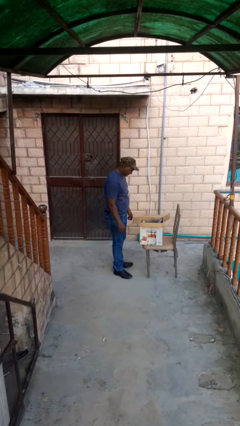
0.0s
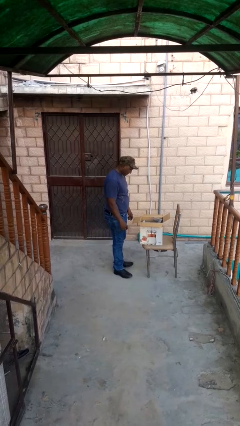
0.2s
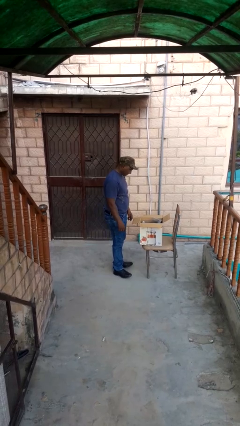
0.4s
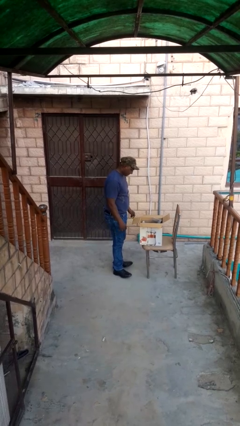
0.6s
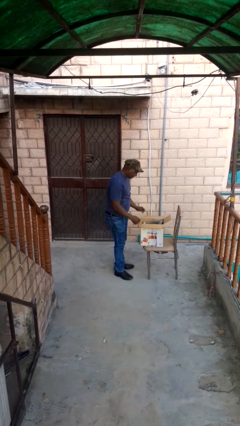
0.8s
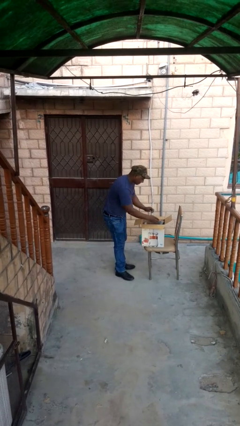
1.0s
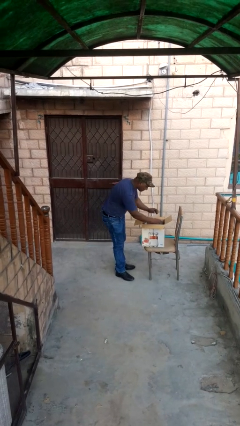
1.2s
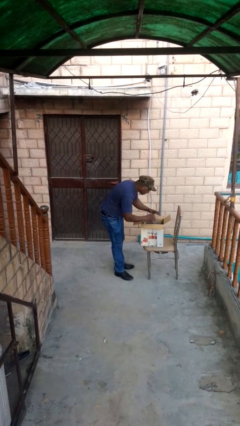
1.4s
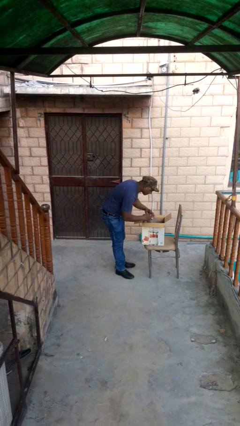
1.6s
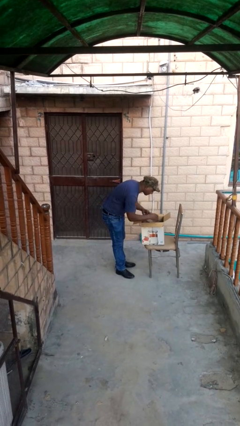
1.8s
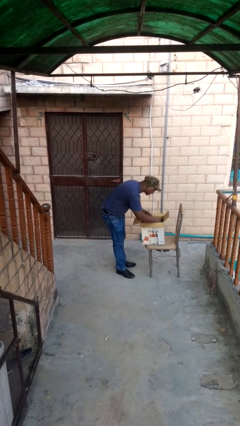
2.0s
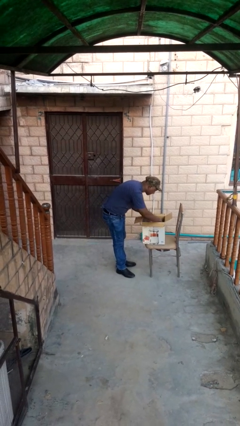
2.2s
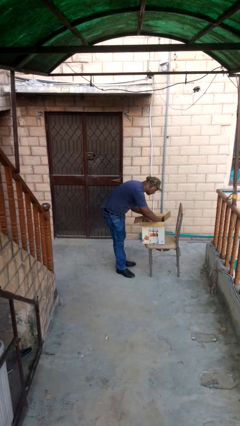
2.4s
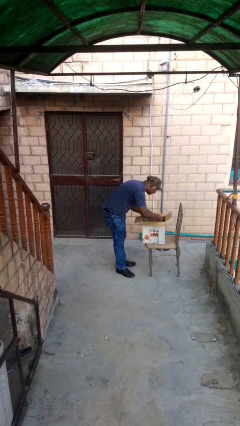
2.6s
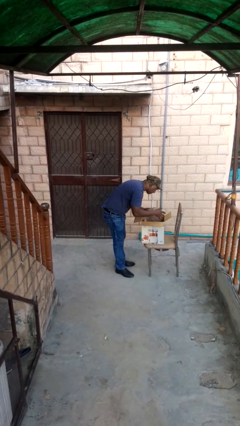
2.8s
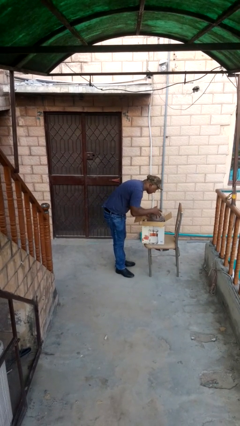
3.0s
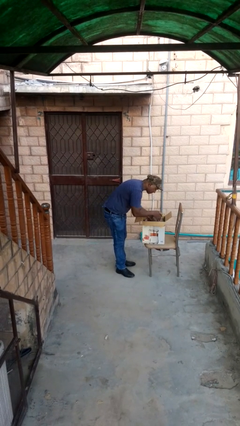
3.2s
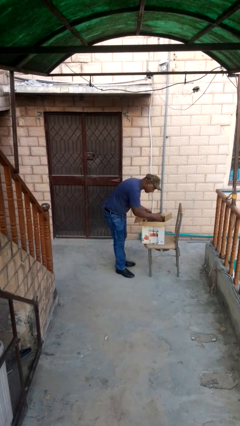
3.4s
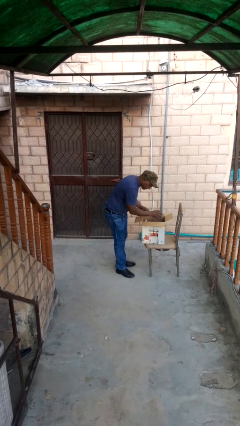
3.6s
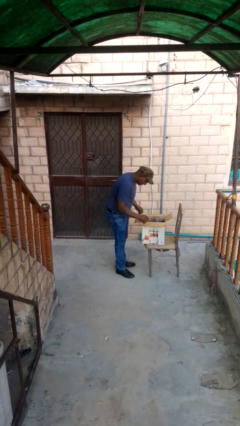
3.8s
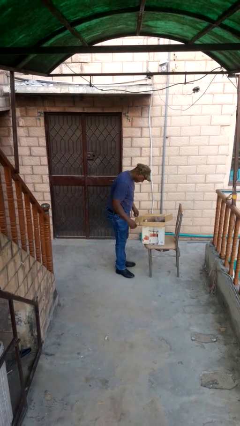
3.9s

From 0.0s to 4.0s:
person searches in box

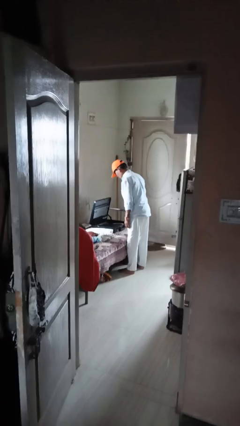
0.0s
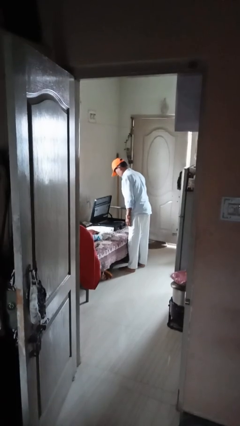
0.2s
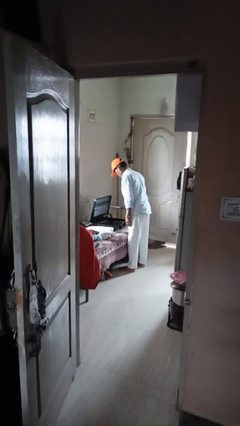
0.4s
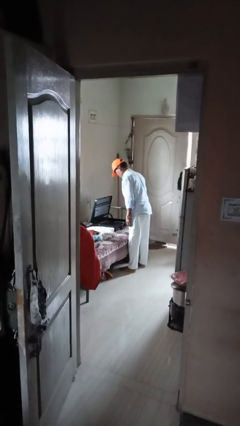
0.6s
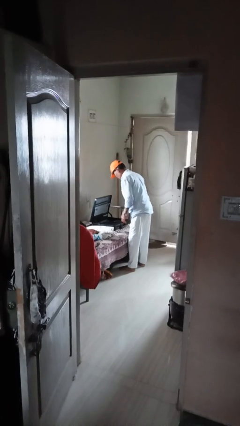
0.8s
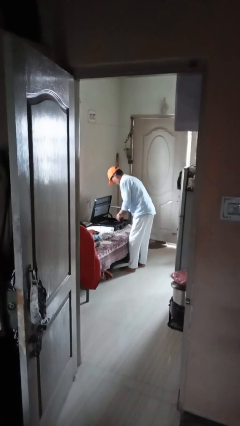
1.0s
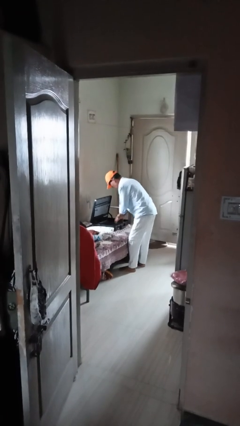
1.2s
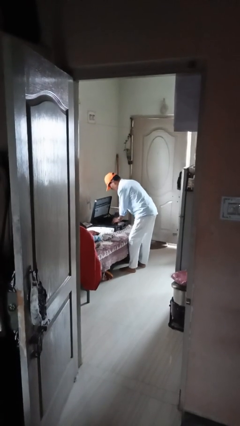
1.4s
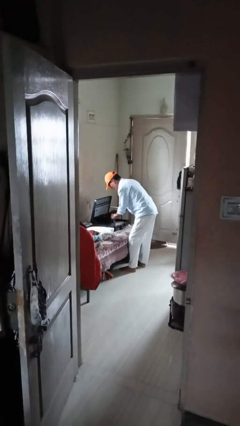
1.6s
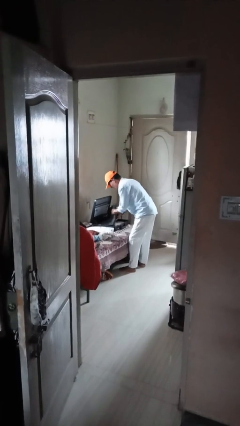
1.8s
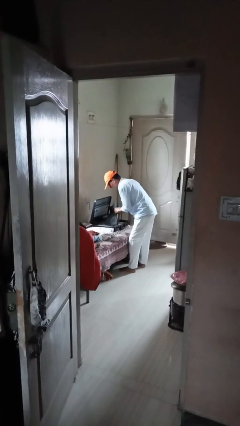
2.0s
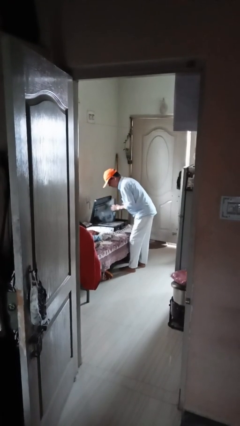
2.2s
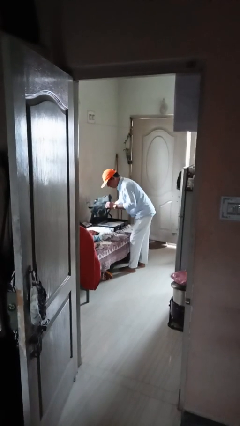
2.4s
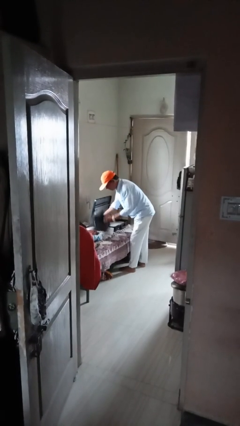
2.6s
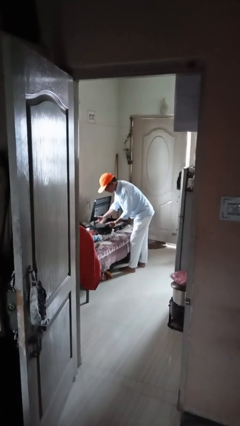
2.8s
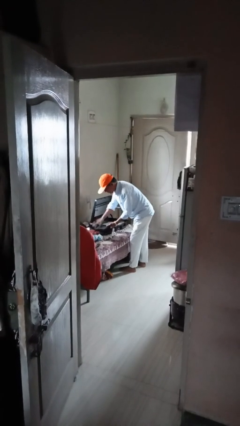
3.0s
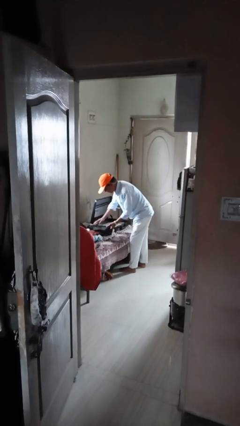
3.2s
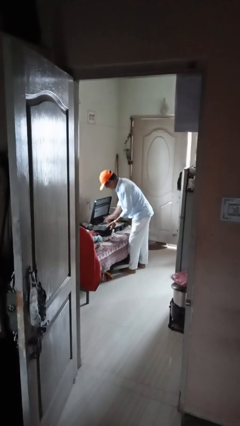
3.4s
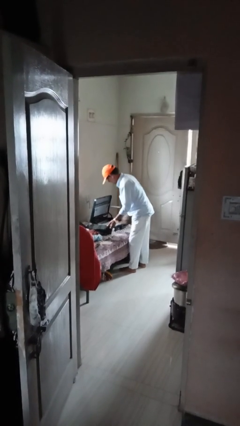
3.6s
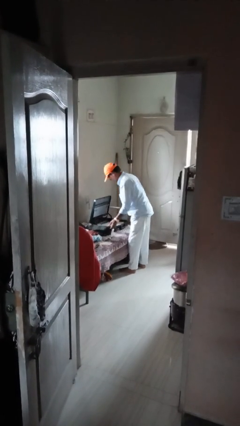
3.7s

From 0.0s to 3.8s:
person unloads clothes from suitcase

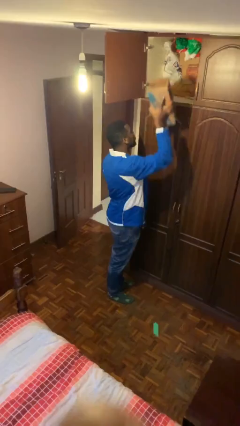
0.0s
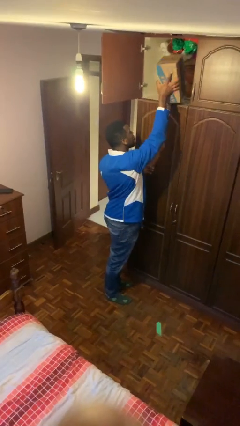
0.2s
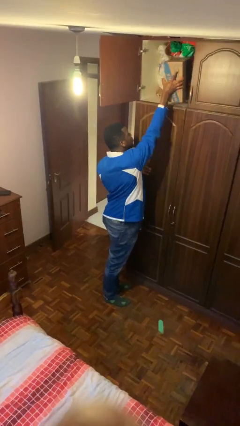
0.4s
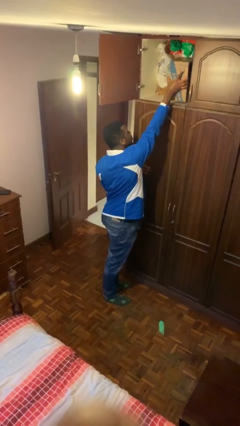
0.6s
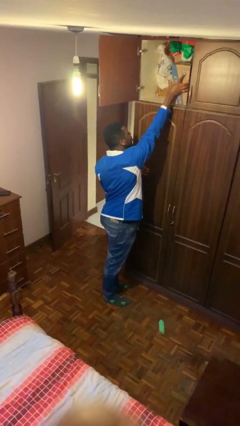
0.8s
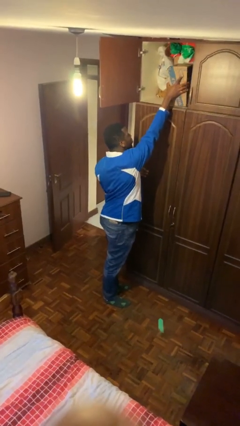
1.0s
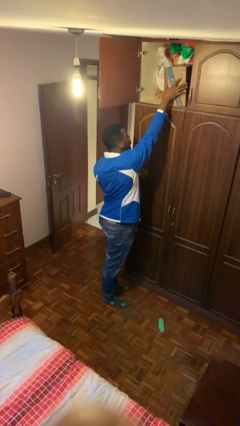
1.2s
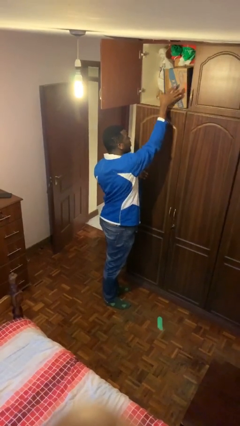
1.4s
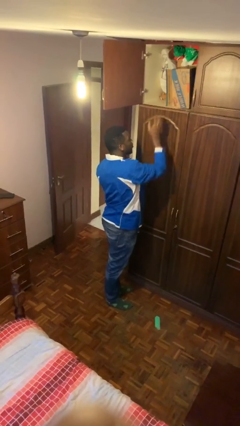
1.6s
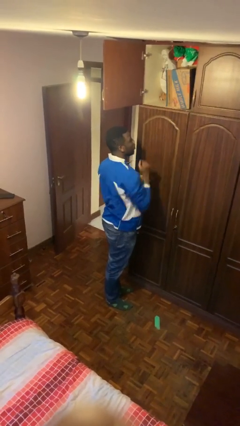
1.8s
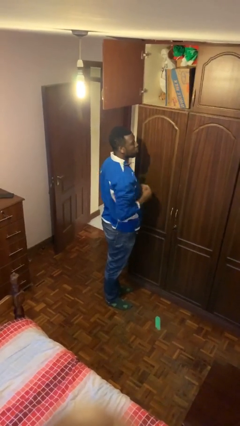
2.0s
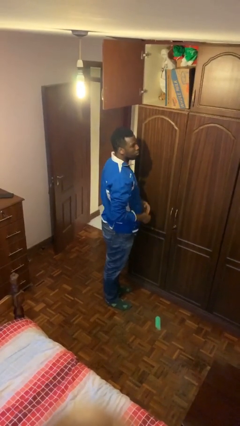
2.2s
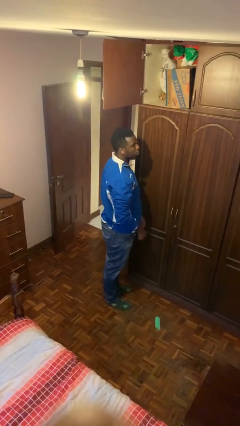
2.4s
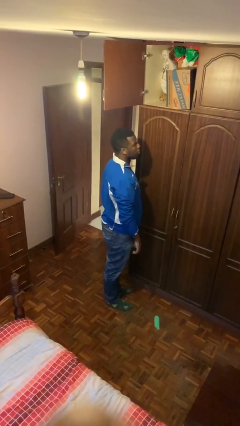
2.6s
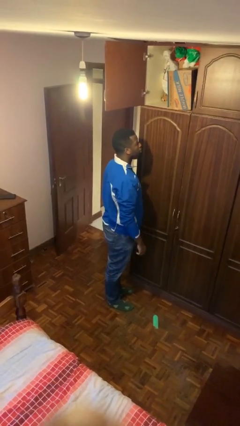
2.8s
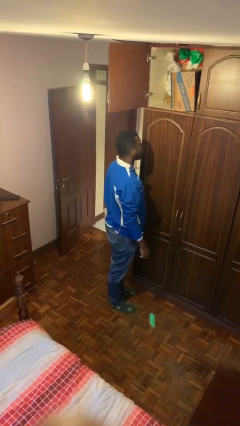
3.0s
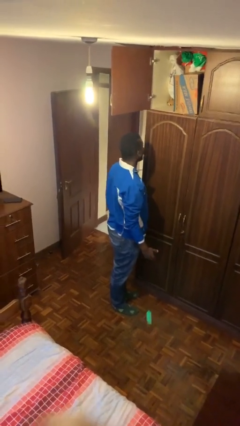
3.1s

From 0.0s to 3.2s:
person puts down object on shelf

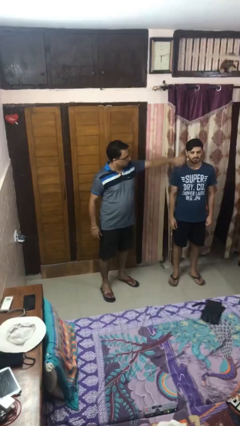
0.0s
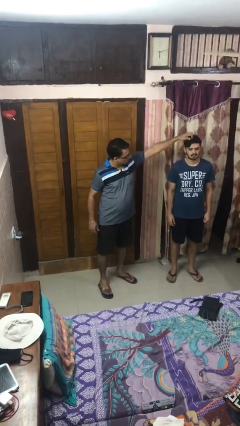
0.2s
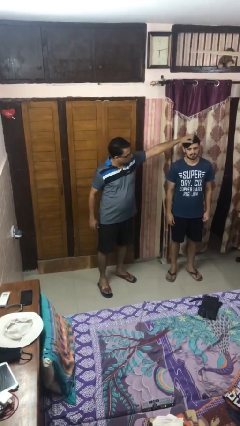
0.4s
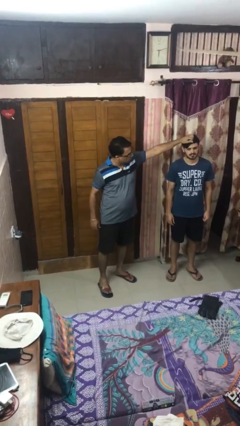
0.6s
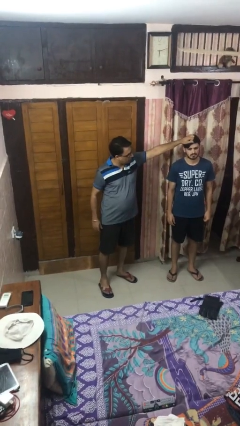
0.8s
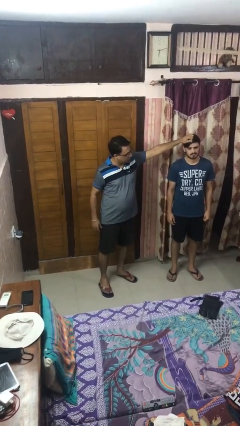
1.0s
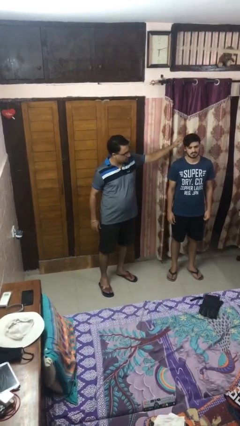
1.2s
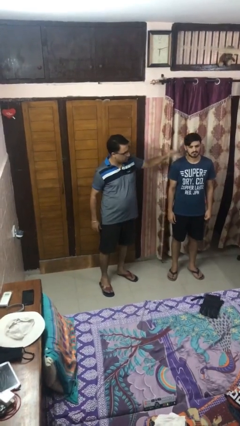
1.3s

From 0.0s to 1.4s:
person grabs person by hair

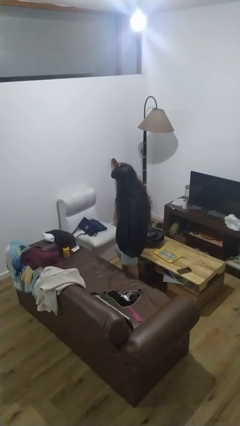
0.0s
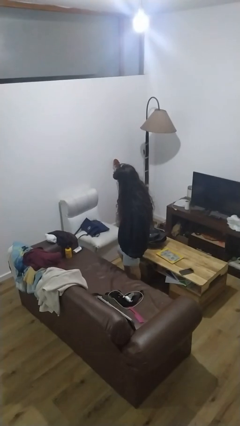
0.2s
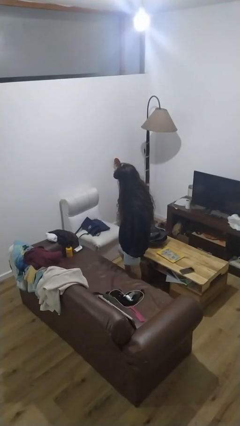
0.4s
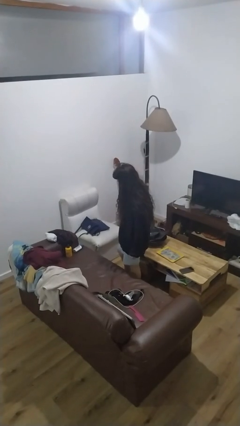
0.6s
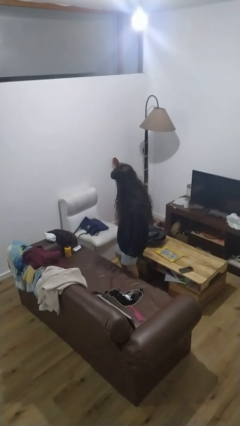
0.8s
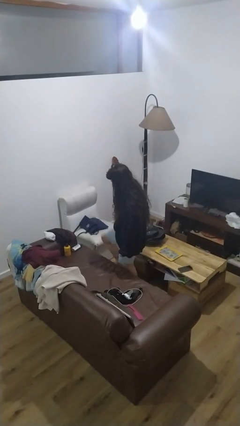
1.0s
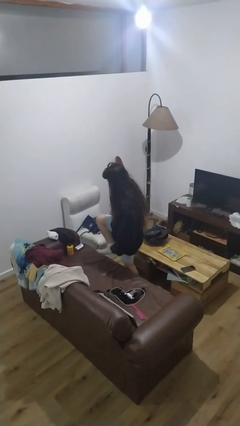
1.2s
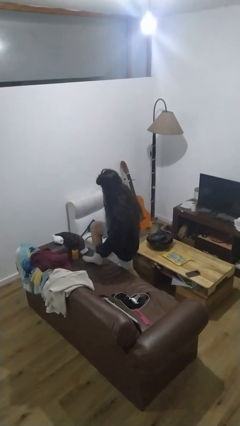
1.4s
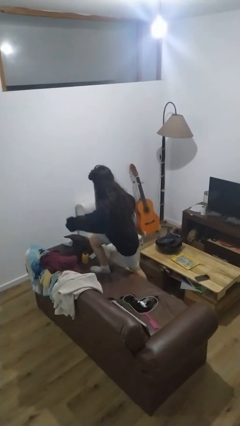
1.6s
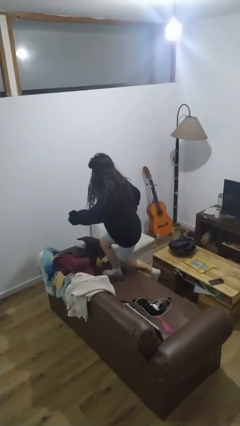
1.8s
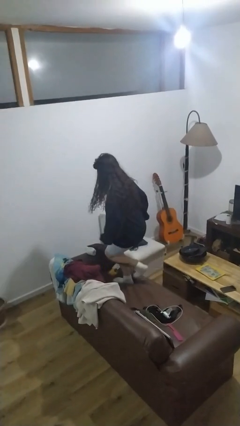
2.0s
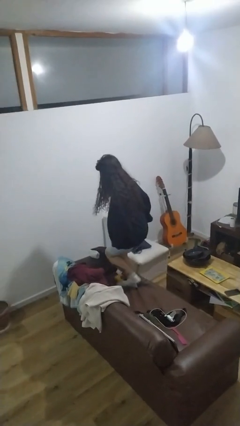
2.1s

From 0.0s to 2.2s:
person climbs on couch

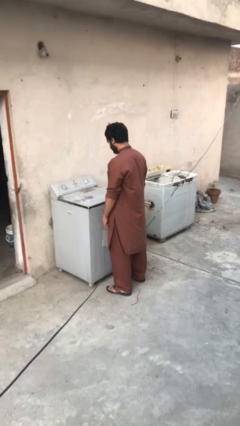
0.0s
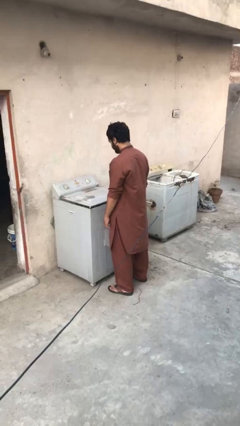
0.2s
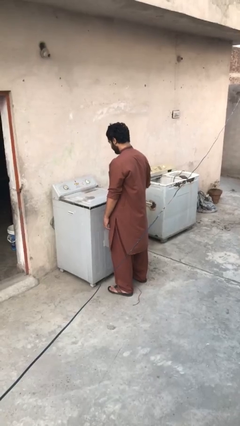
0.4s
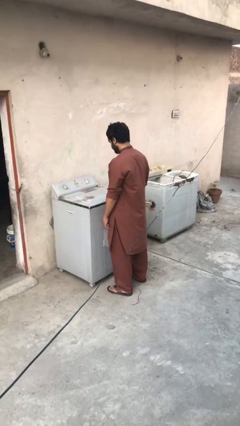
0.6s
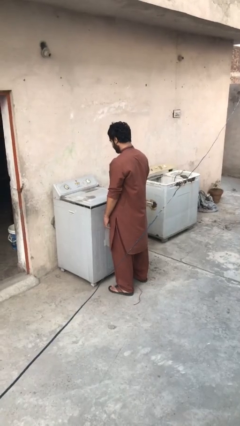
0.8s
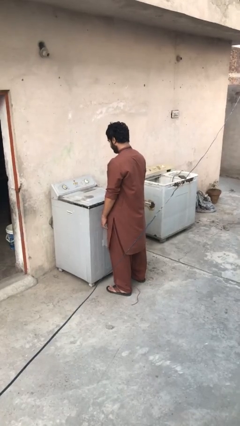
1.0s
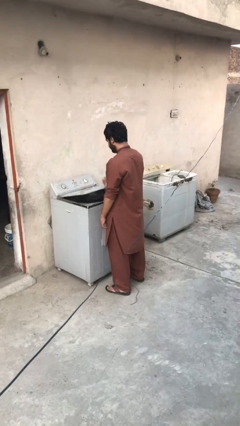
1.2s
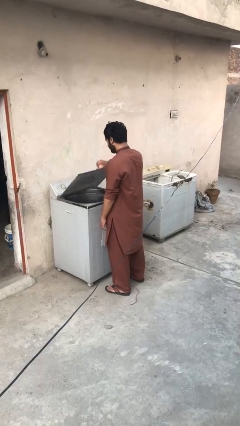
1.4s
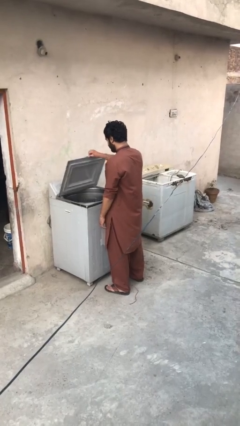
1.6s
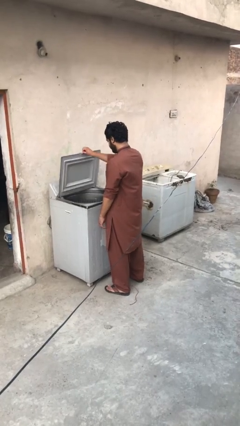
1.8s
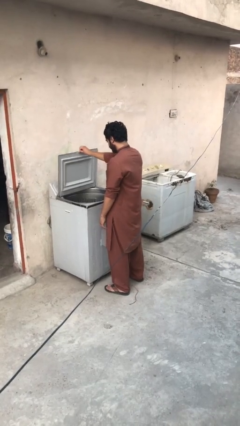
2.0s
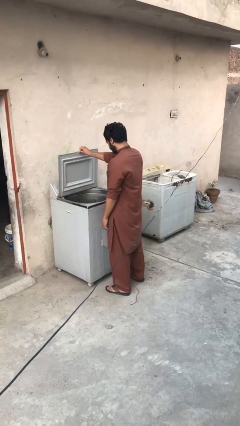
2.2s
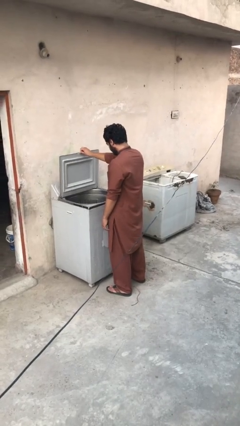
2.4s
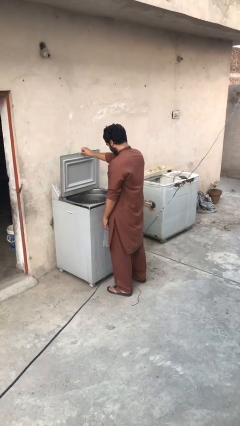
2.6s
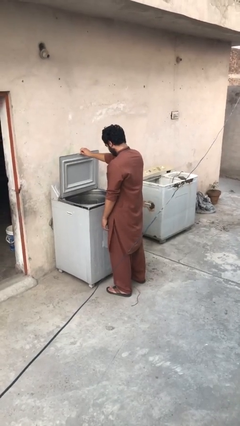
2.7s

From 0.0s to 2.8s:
person opens clothes washer
